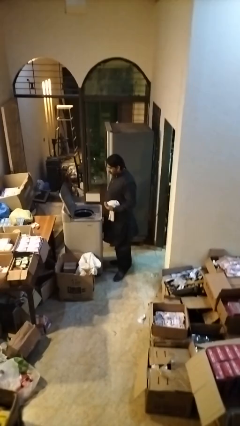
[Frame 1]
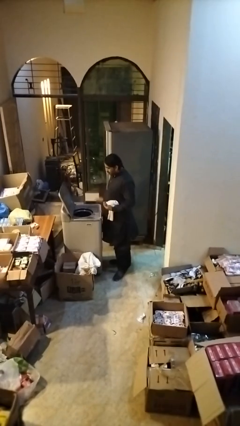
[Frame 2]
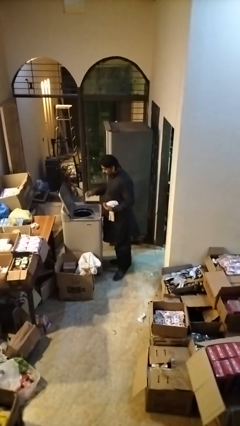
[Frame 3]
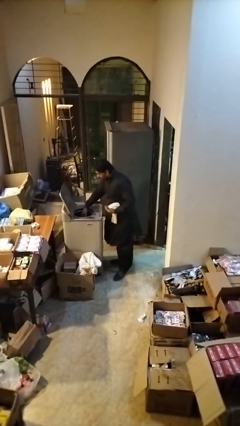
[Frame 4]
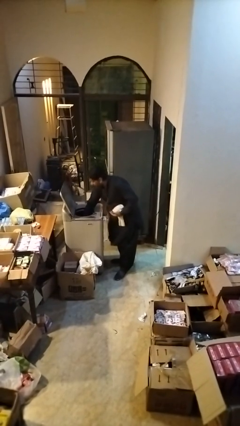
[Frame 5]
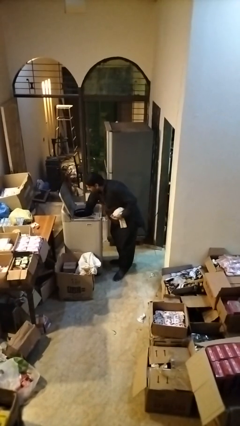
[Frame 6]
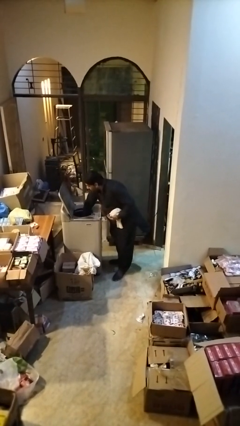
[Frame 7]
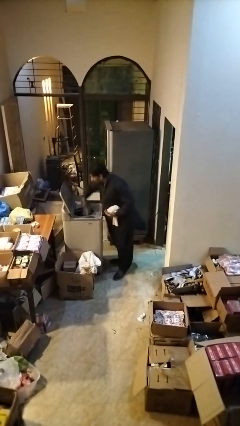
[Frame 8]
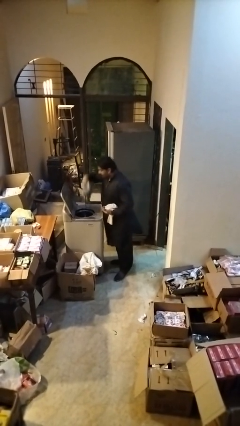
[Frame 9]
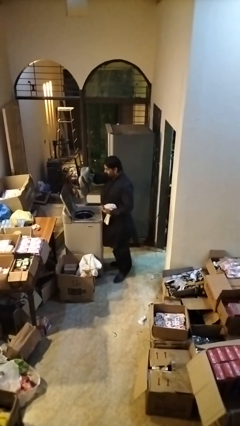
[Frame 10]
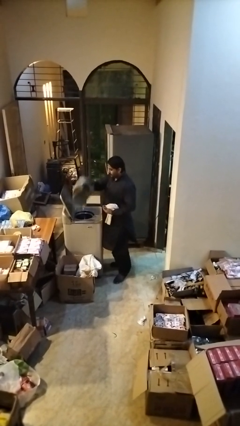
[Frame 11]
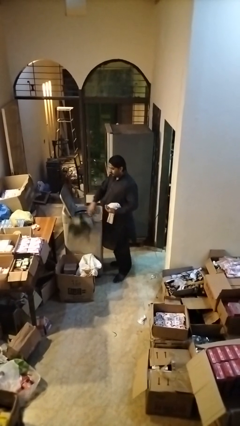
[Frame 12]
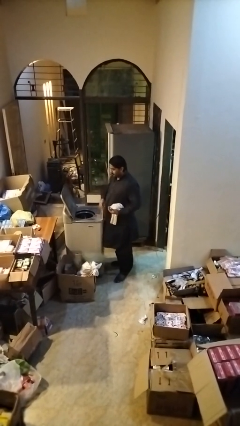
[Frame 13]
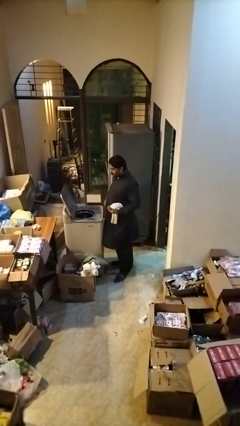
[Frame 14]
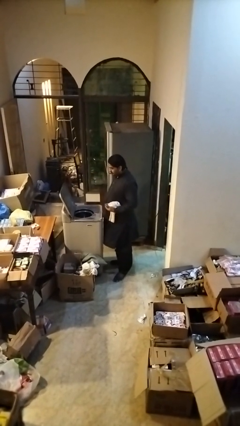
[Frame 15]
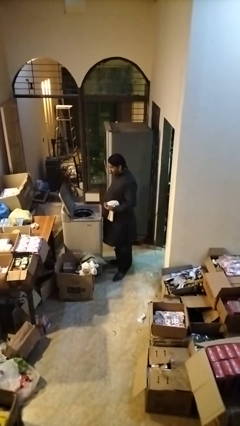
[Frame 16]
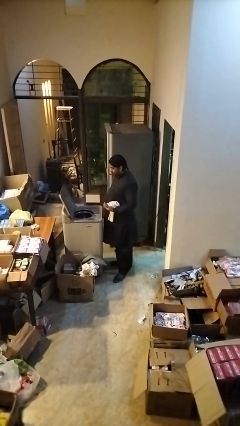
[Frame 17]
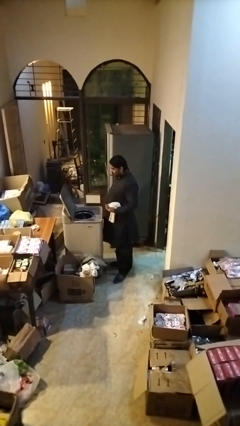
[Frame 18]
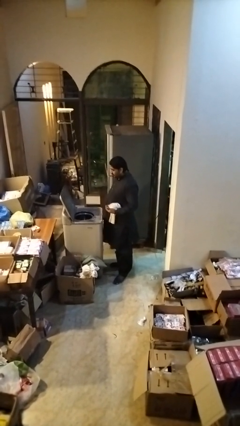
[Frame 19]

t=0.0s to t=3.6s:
person unloads dryer

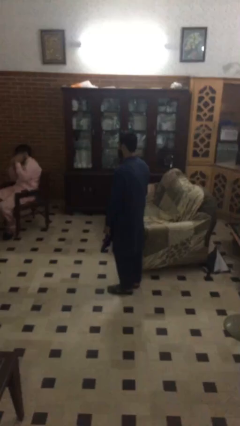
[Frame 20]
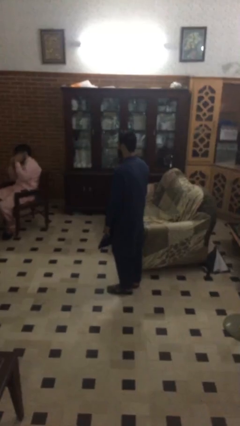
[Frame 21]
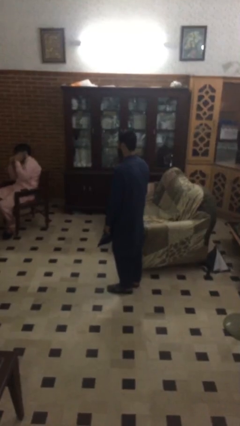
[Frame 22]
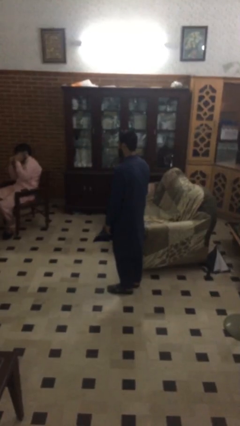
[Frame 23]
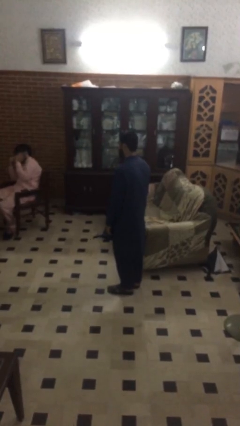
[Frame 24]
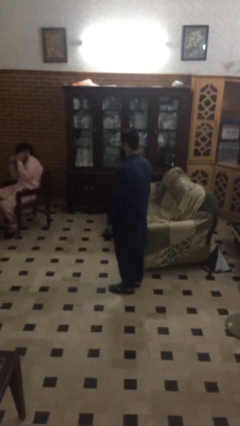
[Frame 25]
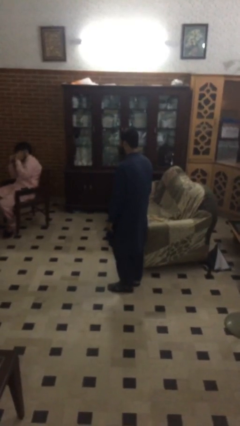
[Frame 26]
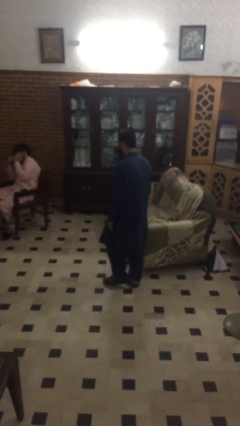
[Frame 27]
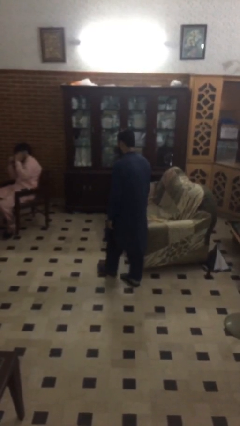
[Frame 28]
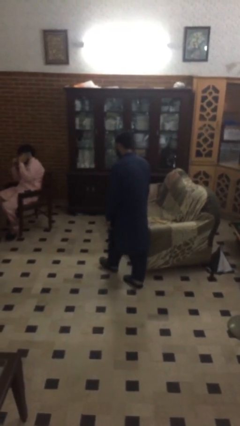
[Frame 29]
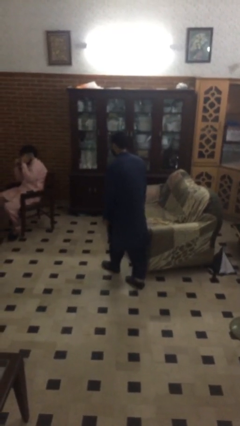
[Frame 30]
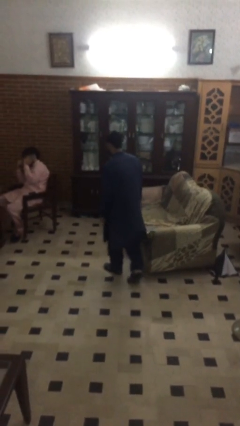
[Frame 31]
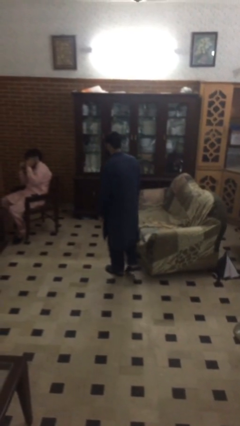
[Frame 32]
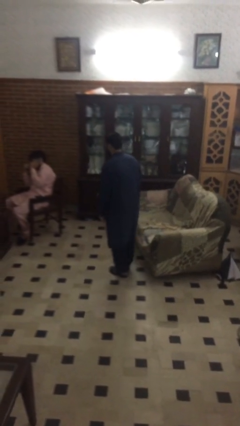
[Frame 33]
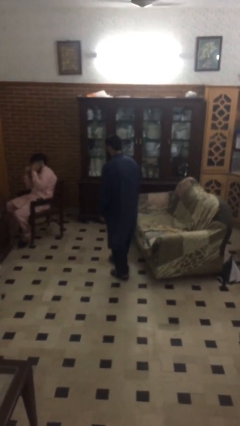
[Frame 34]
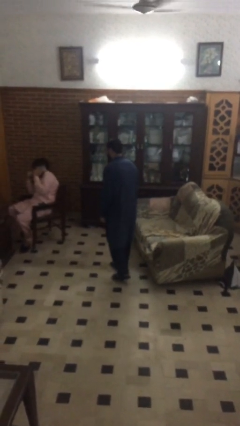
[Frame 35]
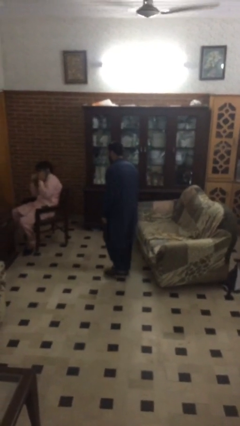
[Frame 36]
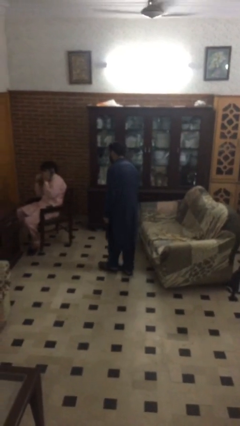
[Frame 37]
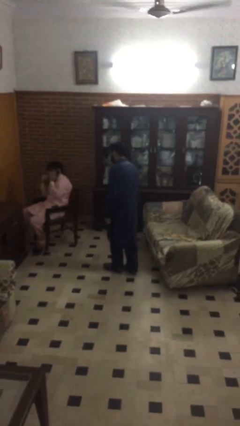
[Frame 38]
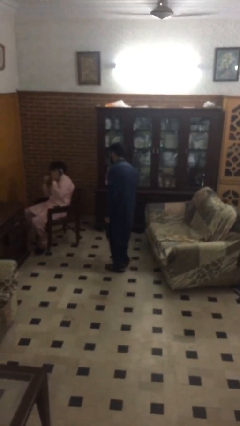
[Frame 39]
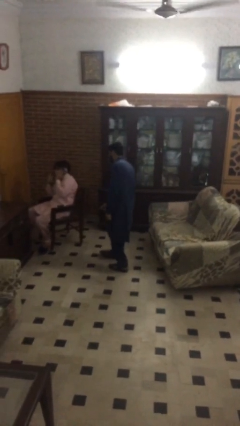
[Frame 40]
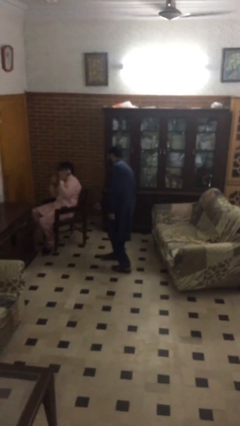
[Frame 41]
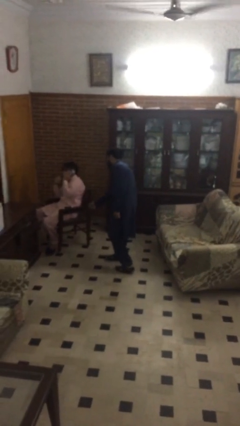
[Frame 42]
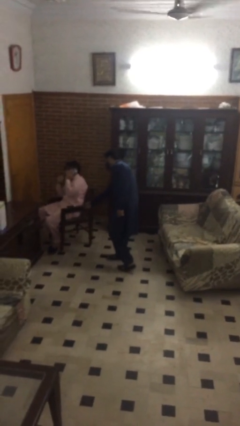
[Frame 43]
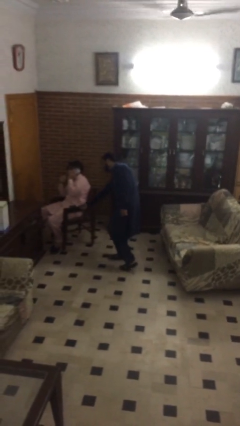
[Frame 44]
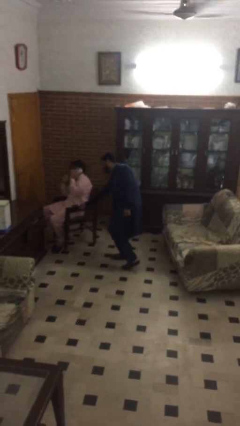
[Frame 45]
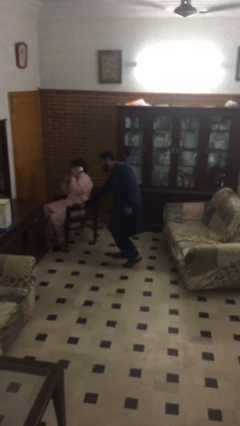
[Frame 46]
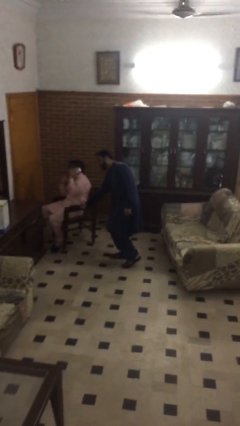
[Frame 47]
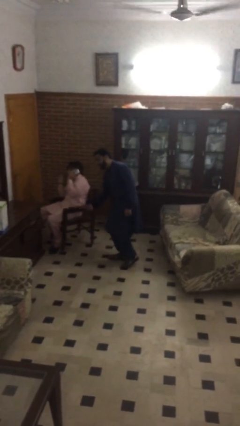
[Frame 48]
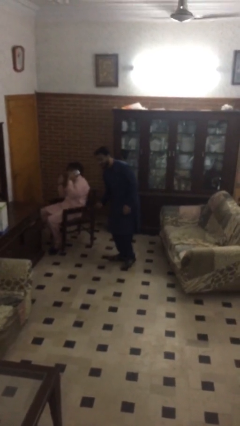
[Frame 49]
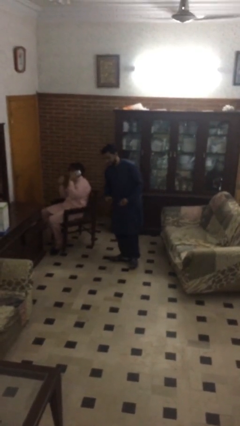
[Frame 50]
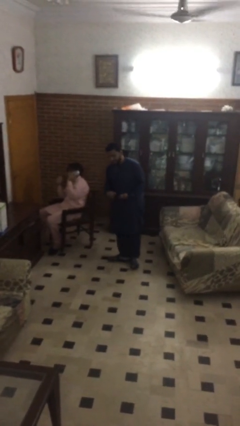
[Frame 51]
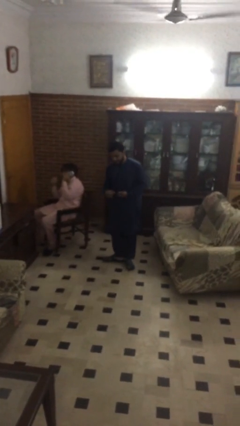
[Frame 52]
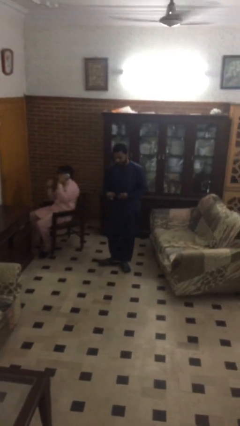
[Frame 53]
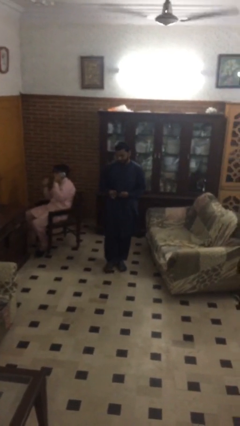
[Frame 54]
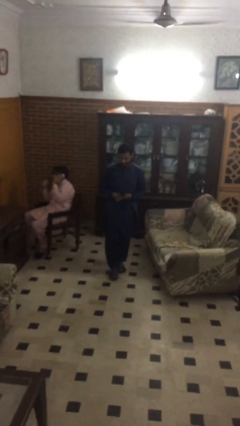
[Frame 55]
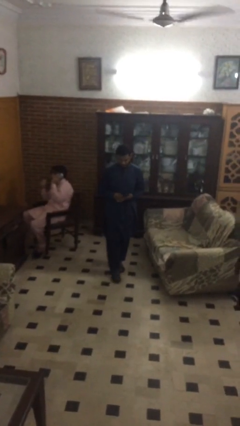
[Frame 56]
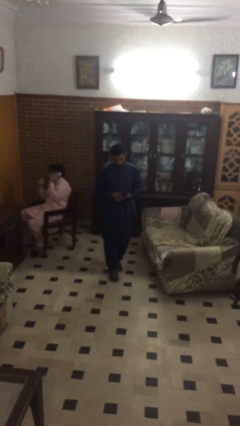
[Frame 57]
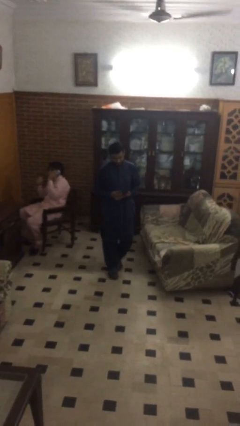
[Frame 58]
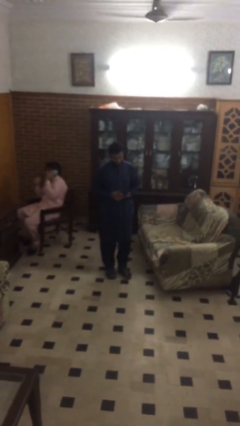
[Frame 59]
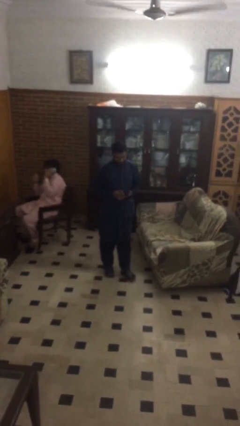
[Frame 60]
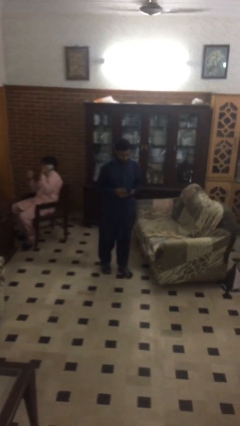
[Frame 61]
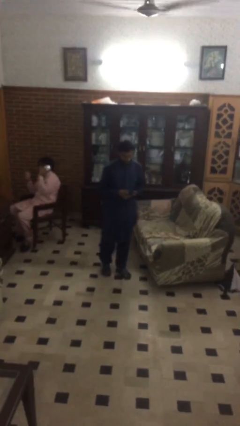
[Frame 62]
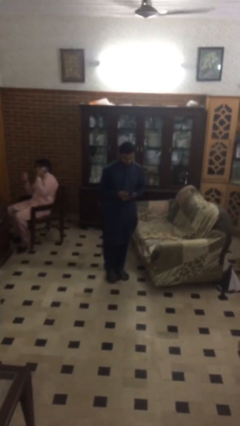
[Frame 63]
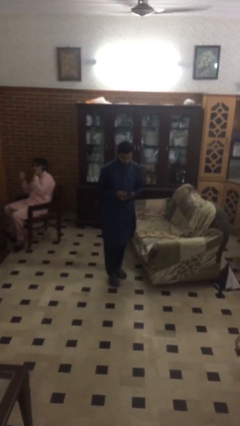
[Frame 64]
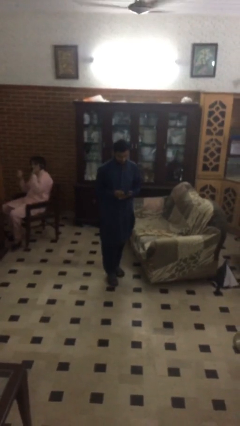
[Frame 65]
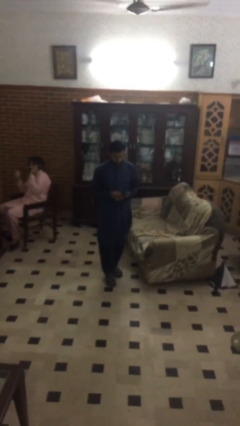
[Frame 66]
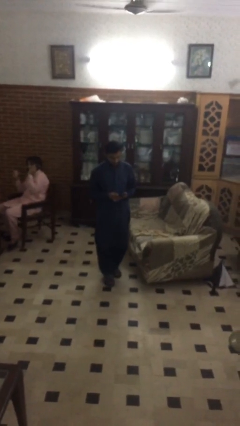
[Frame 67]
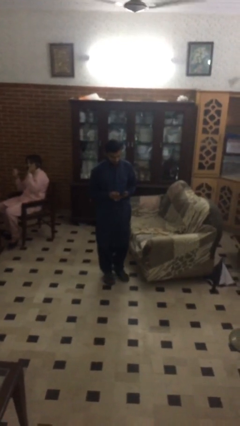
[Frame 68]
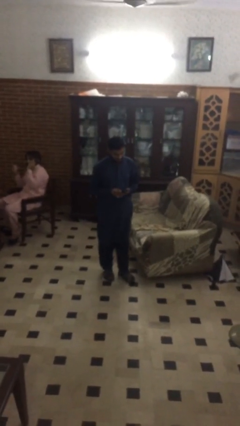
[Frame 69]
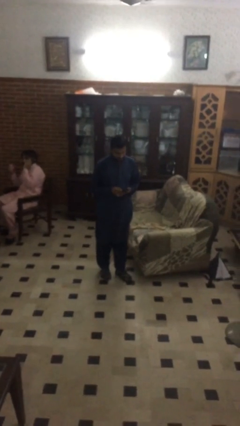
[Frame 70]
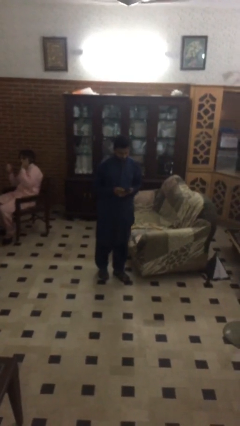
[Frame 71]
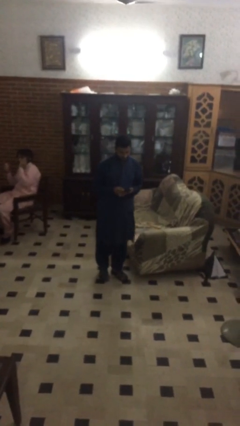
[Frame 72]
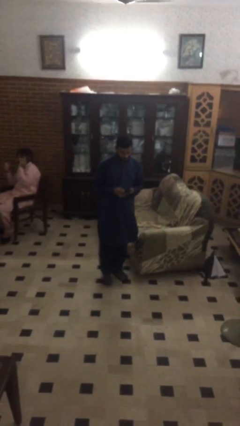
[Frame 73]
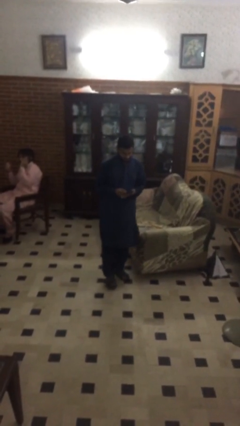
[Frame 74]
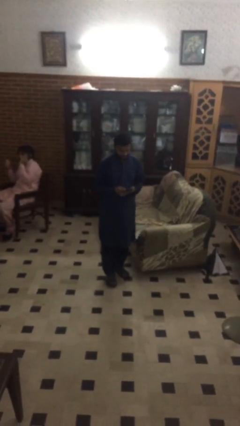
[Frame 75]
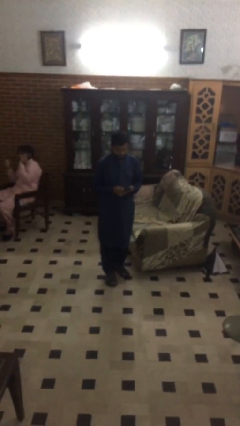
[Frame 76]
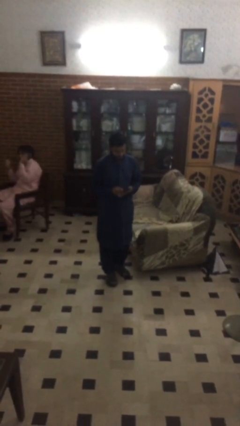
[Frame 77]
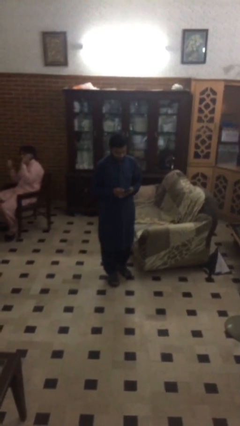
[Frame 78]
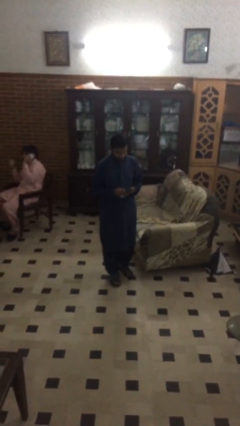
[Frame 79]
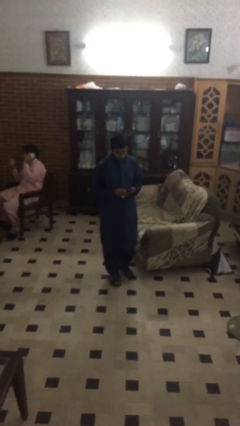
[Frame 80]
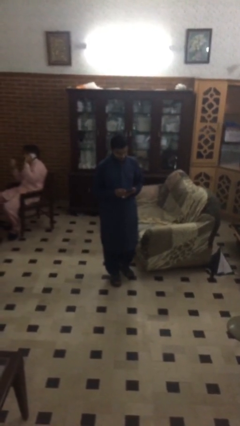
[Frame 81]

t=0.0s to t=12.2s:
person steals object from person

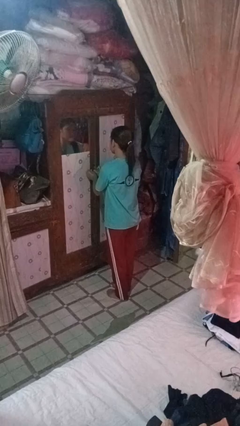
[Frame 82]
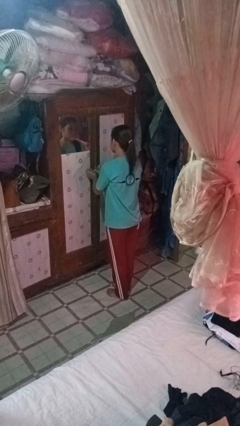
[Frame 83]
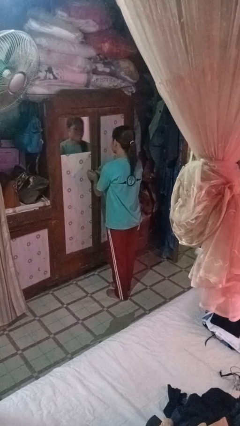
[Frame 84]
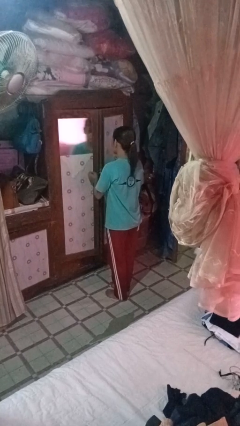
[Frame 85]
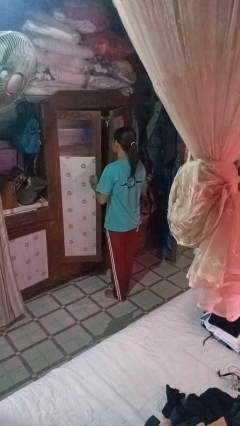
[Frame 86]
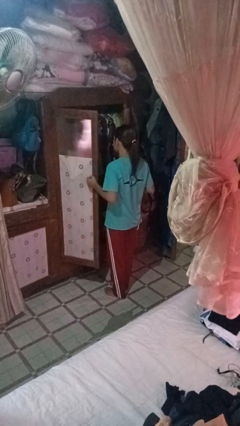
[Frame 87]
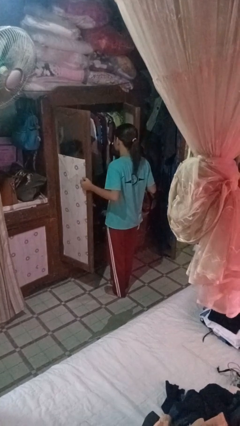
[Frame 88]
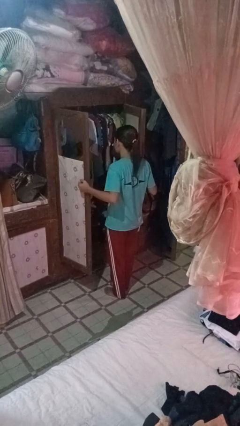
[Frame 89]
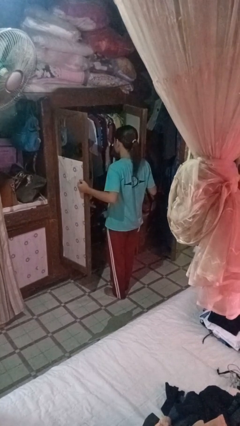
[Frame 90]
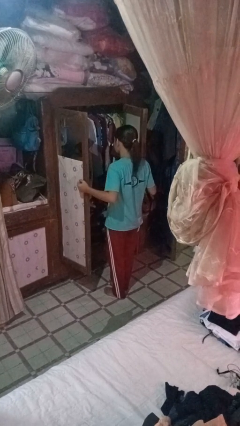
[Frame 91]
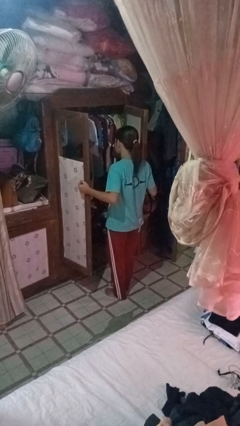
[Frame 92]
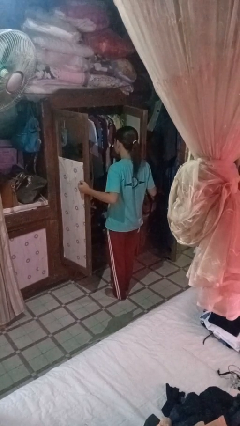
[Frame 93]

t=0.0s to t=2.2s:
person opens closet door

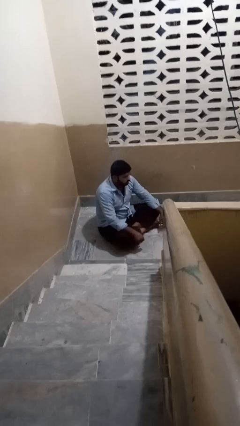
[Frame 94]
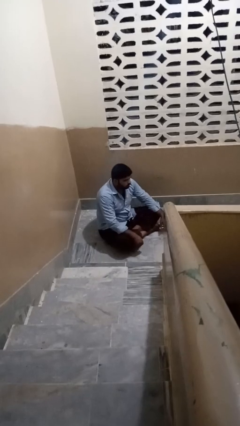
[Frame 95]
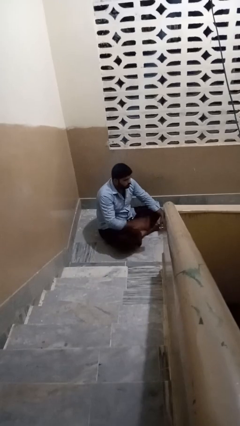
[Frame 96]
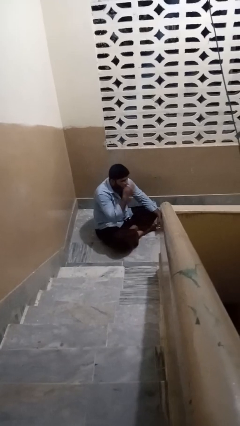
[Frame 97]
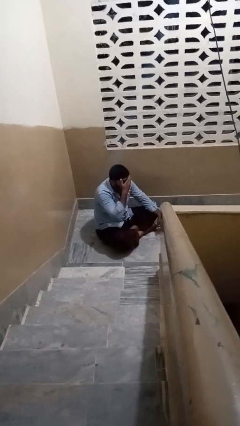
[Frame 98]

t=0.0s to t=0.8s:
person covers face with hands
